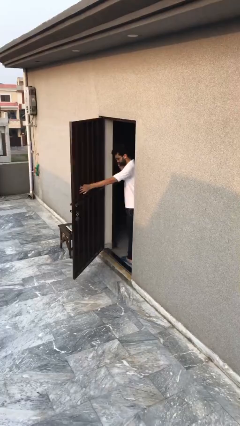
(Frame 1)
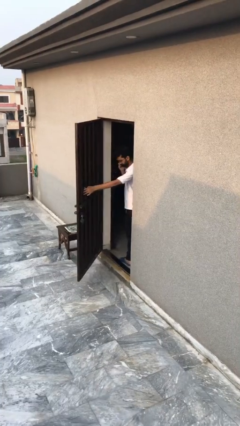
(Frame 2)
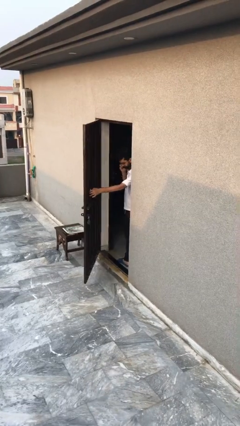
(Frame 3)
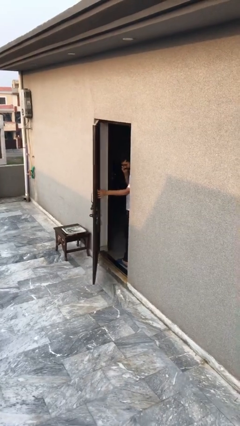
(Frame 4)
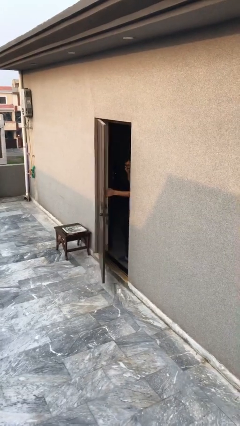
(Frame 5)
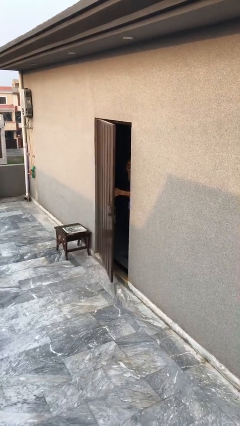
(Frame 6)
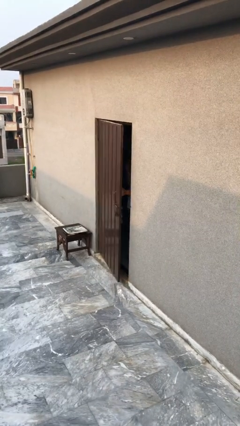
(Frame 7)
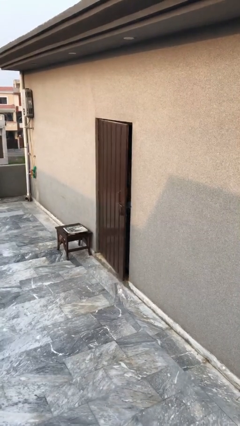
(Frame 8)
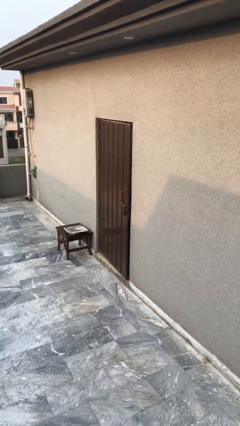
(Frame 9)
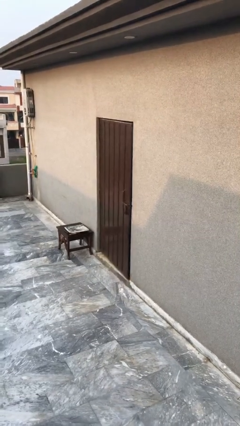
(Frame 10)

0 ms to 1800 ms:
person closes facility door

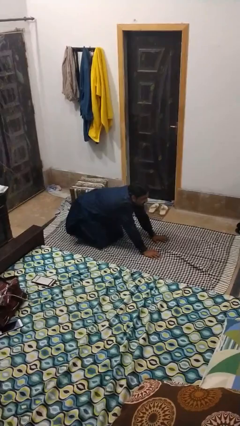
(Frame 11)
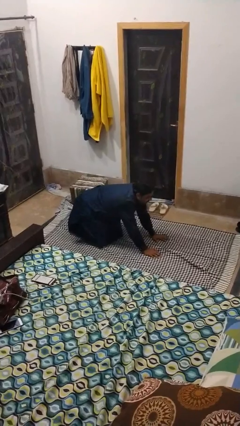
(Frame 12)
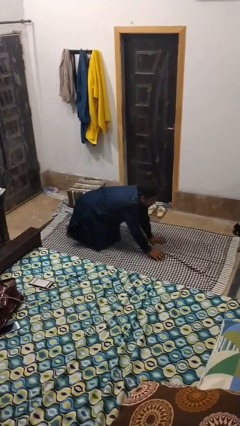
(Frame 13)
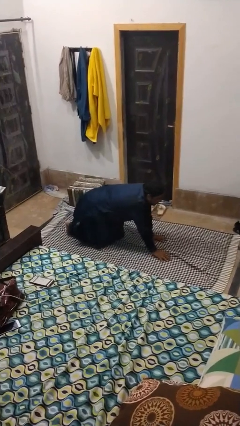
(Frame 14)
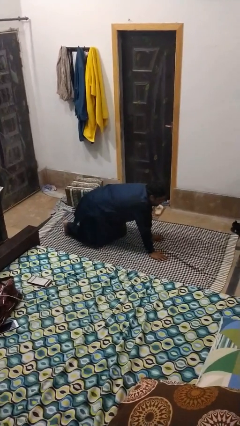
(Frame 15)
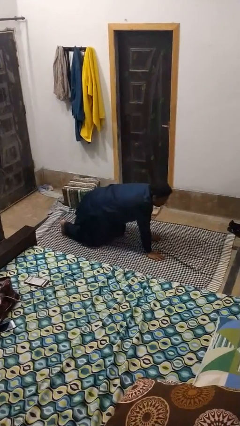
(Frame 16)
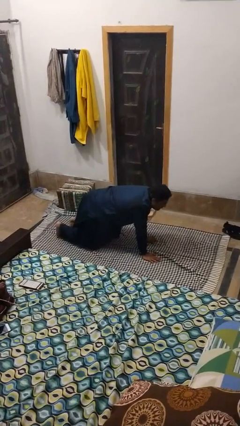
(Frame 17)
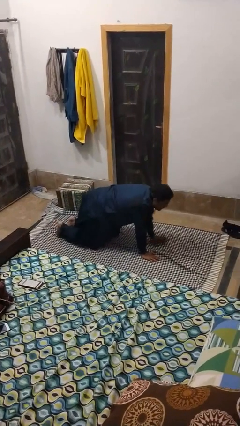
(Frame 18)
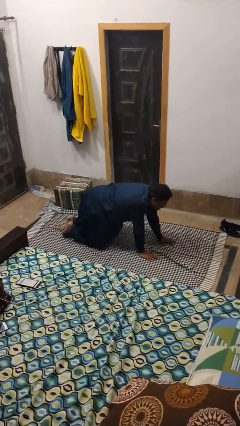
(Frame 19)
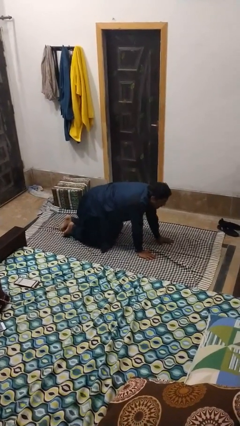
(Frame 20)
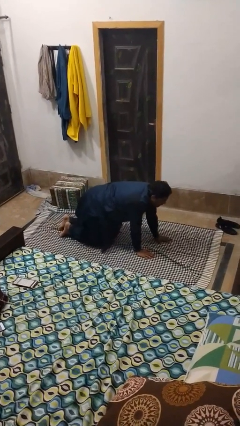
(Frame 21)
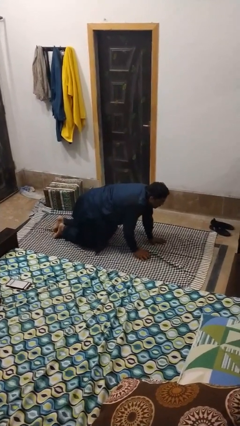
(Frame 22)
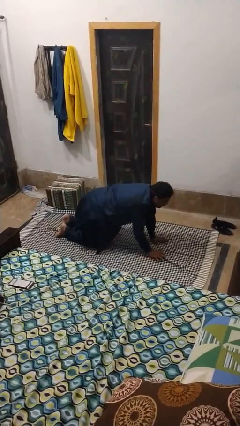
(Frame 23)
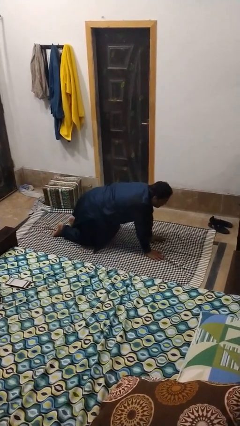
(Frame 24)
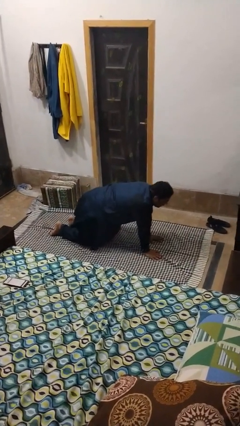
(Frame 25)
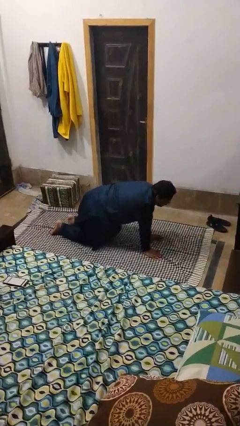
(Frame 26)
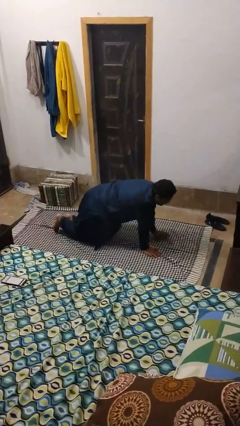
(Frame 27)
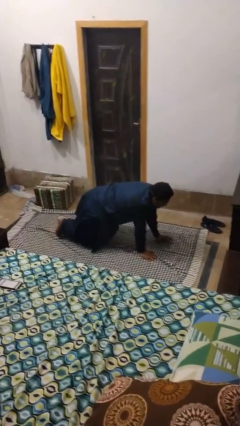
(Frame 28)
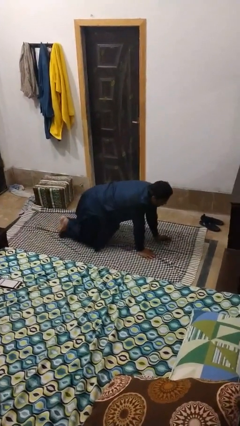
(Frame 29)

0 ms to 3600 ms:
person crawls

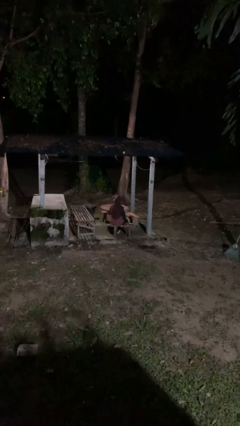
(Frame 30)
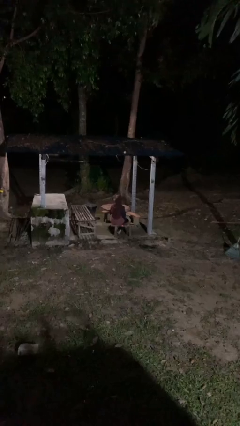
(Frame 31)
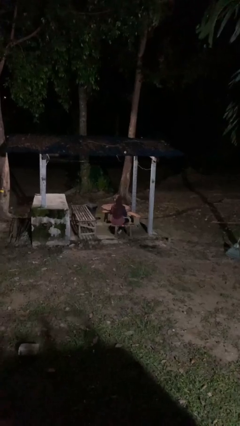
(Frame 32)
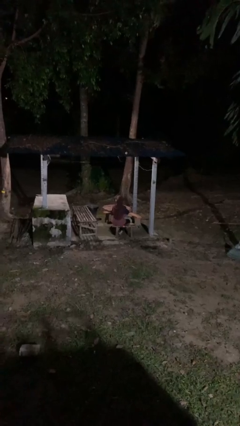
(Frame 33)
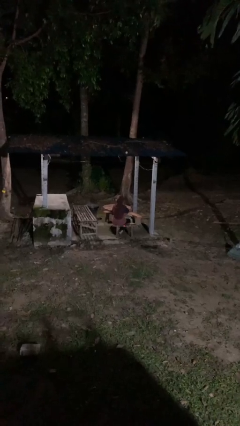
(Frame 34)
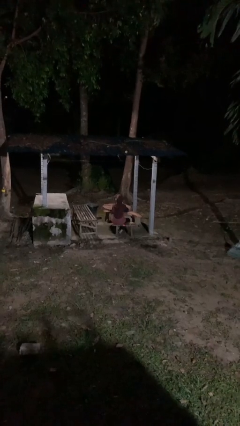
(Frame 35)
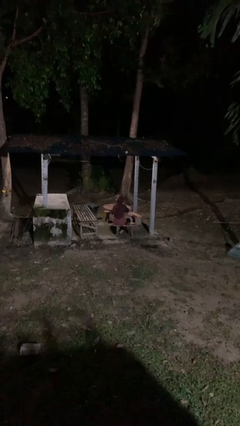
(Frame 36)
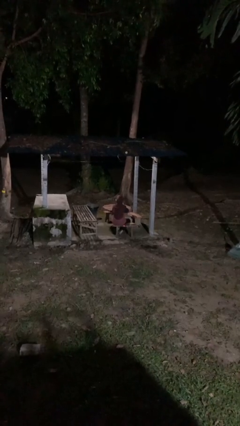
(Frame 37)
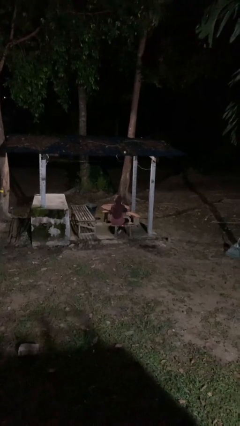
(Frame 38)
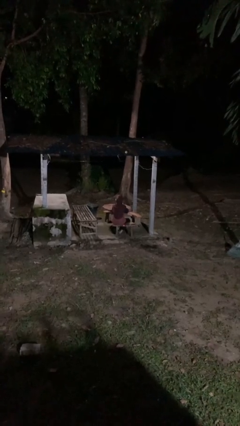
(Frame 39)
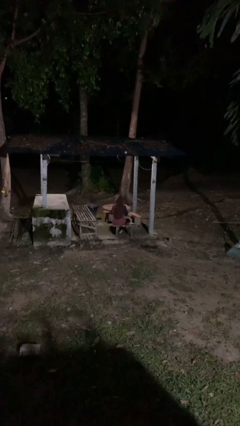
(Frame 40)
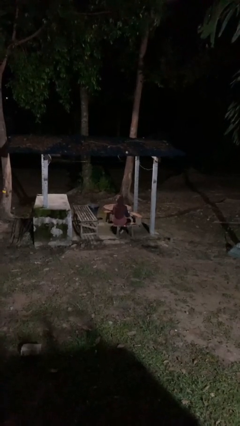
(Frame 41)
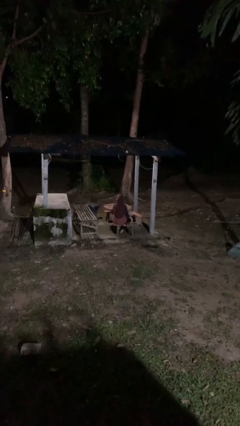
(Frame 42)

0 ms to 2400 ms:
person strokes chin

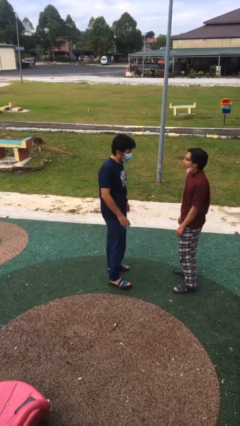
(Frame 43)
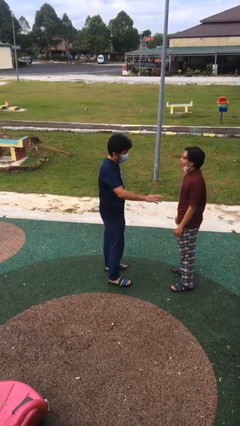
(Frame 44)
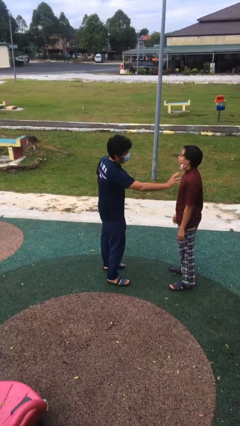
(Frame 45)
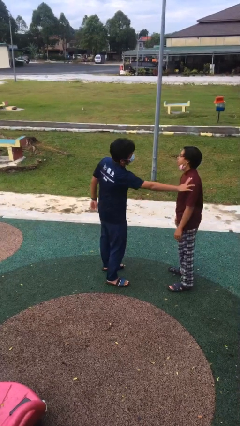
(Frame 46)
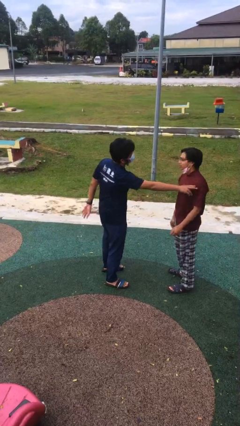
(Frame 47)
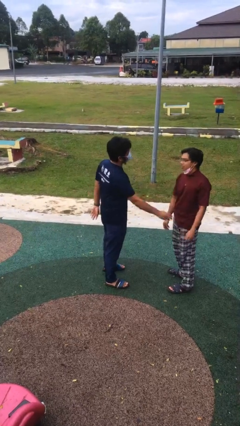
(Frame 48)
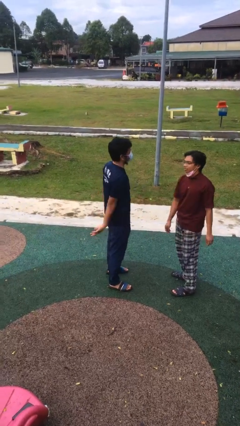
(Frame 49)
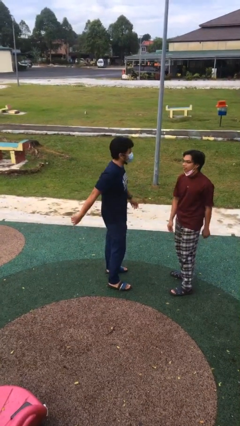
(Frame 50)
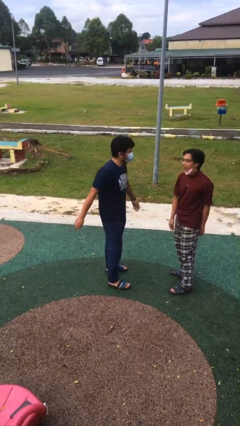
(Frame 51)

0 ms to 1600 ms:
person shoves person

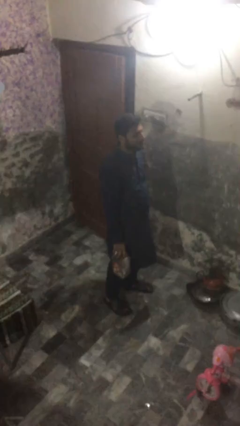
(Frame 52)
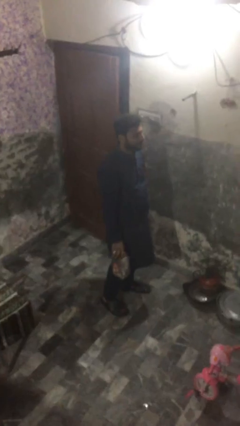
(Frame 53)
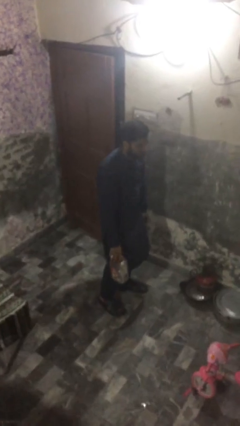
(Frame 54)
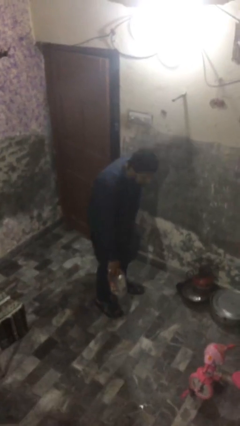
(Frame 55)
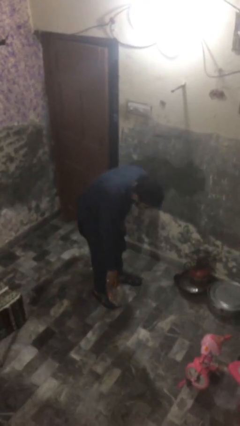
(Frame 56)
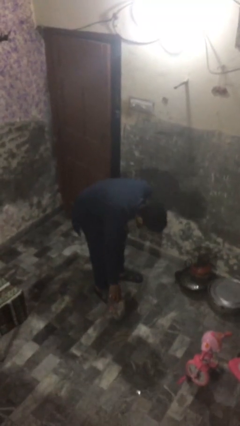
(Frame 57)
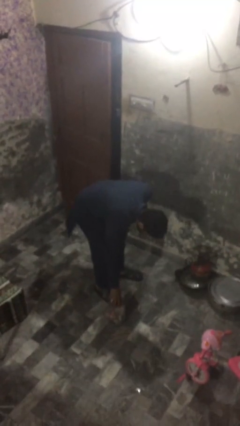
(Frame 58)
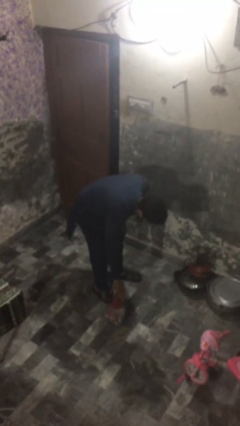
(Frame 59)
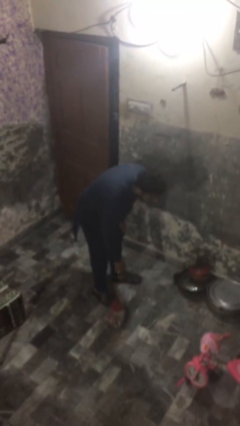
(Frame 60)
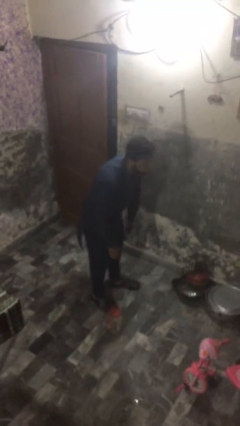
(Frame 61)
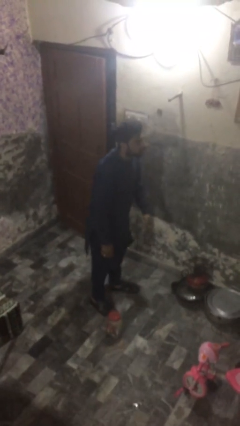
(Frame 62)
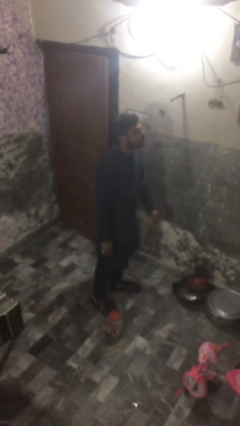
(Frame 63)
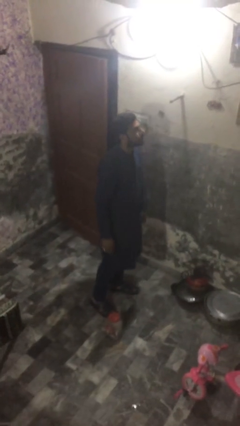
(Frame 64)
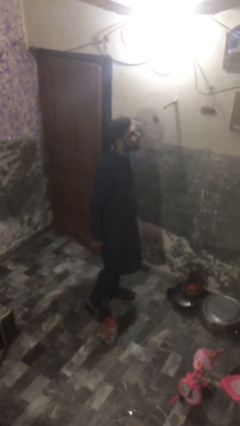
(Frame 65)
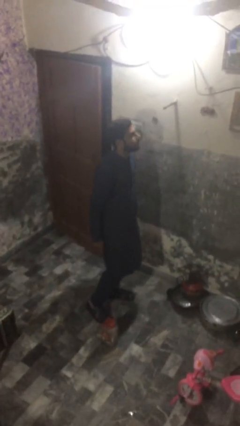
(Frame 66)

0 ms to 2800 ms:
person puts down object on floor

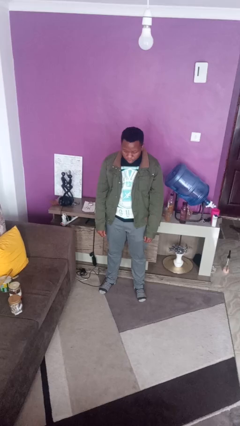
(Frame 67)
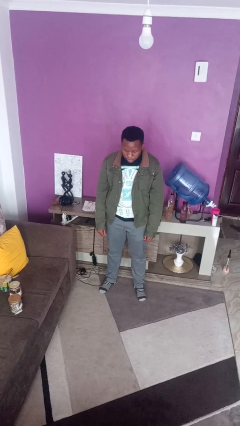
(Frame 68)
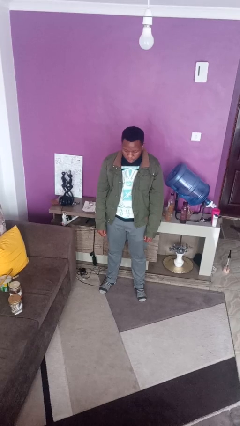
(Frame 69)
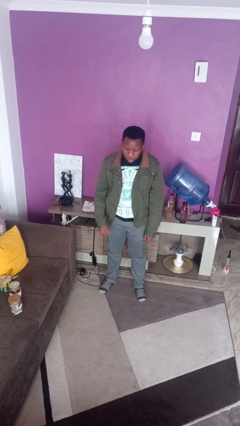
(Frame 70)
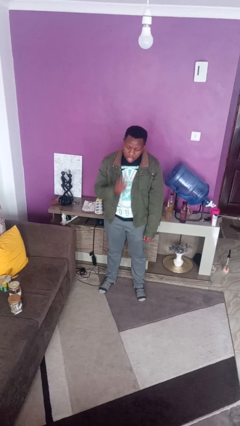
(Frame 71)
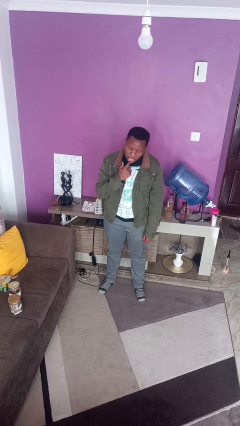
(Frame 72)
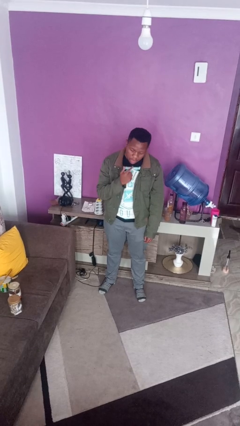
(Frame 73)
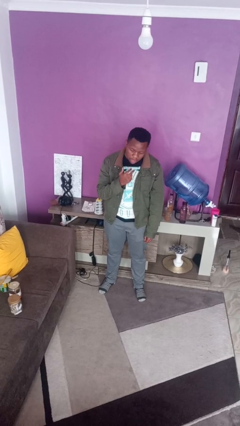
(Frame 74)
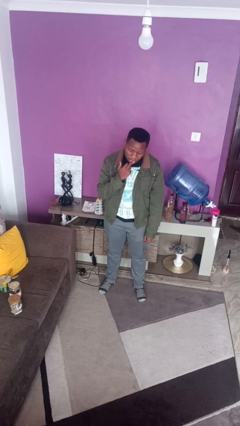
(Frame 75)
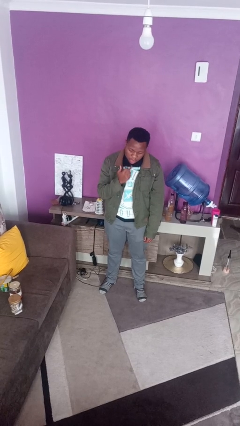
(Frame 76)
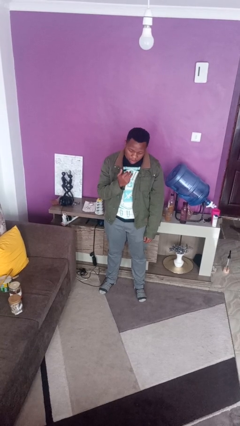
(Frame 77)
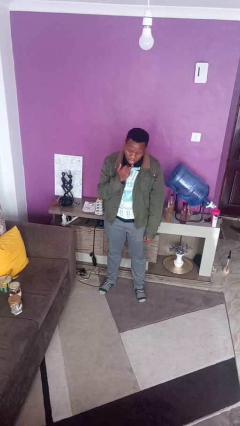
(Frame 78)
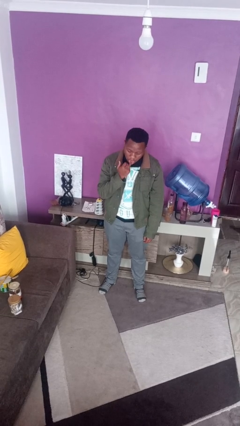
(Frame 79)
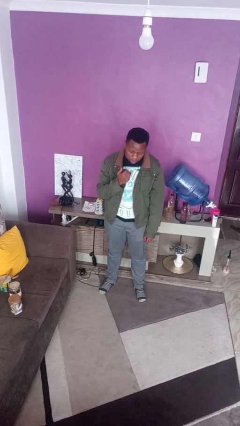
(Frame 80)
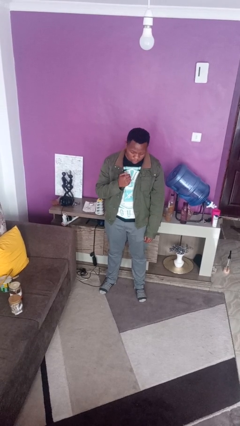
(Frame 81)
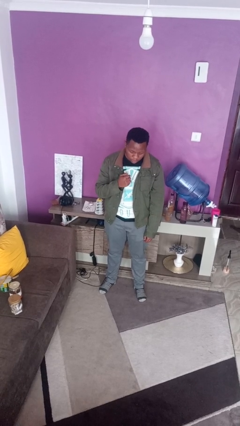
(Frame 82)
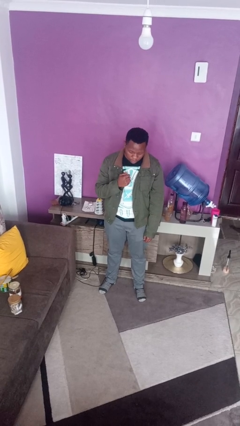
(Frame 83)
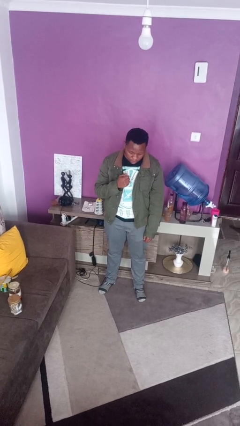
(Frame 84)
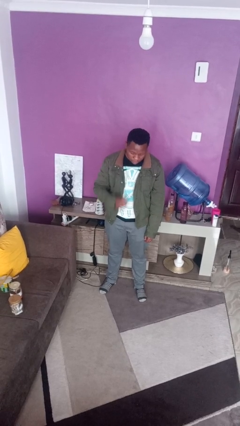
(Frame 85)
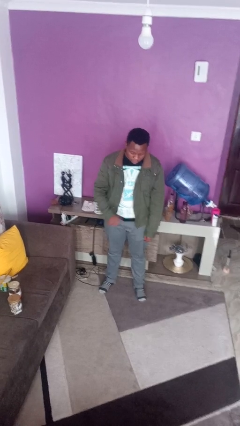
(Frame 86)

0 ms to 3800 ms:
person licks fingers

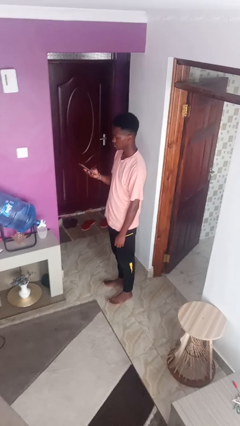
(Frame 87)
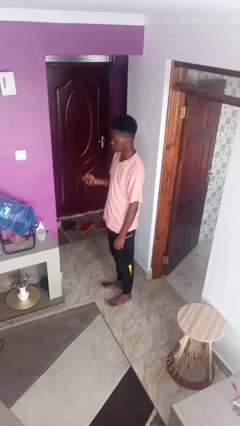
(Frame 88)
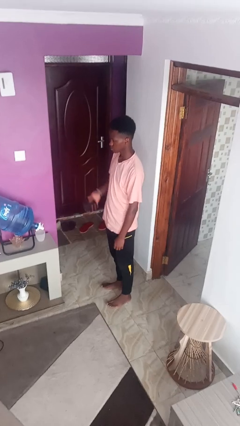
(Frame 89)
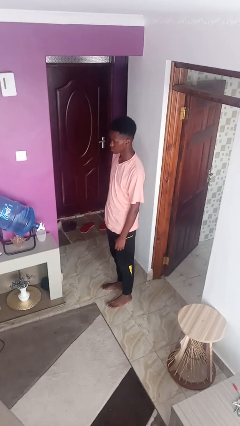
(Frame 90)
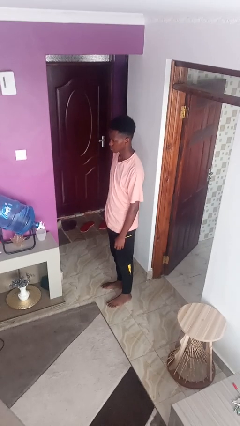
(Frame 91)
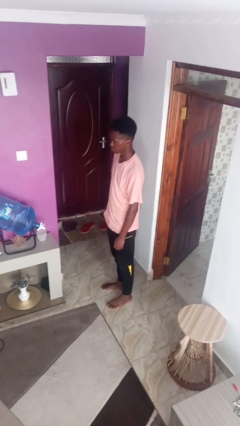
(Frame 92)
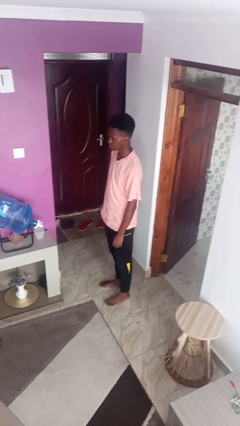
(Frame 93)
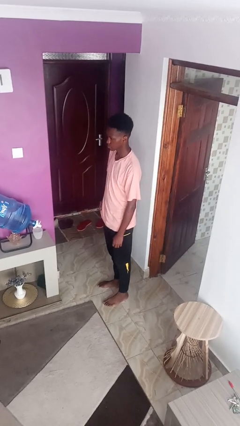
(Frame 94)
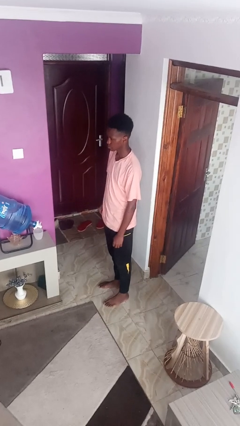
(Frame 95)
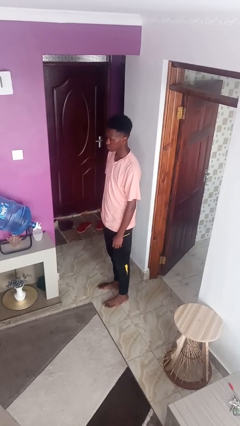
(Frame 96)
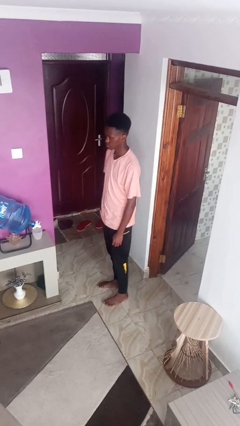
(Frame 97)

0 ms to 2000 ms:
person puts phone into pocket
